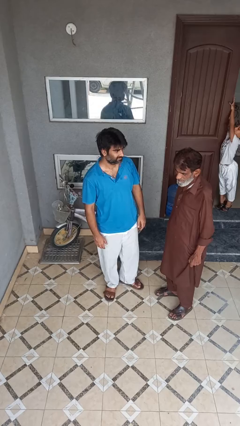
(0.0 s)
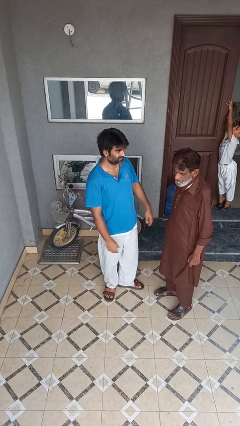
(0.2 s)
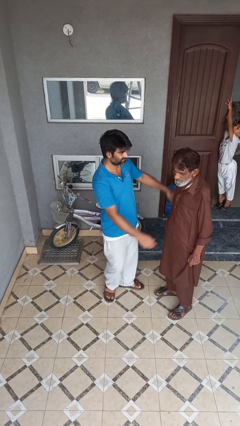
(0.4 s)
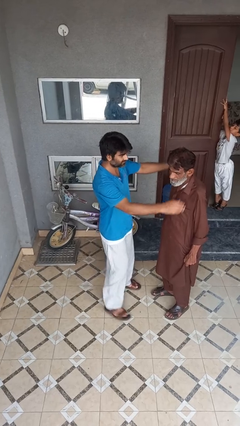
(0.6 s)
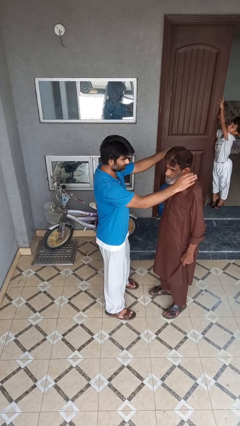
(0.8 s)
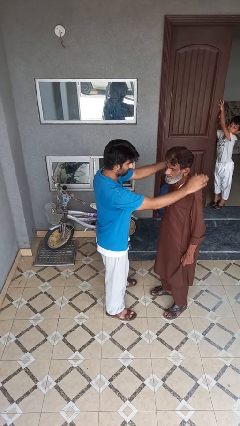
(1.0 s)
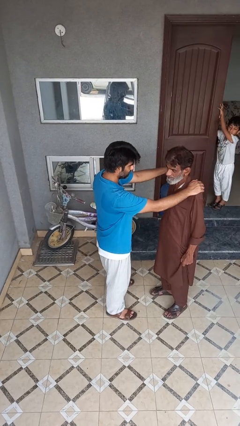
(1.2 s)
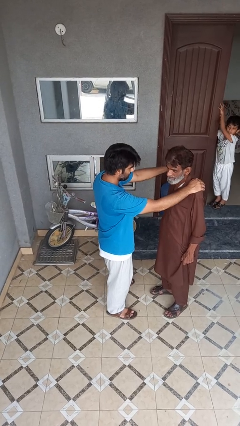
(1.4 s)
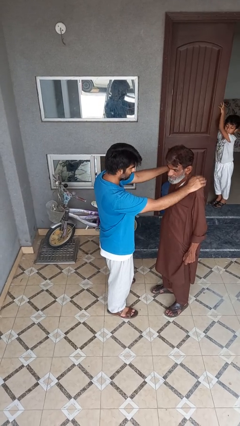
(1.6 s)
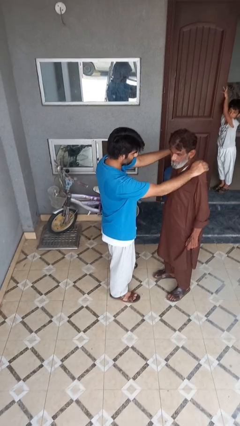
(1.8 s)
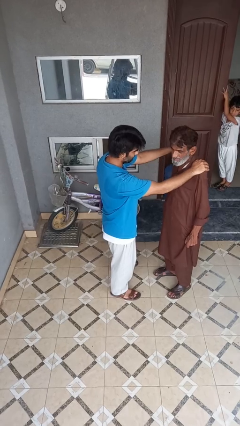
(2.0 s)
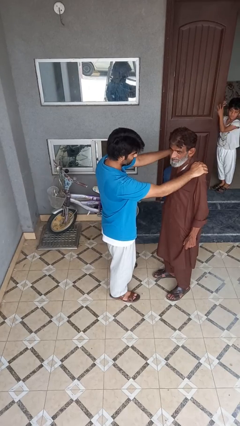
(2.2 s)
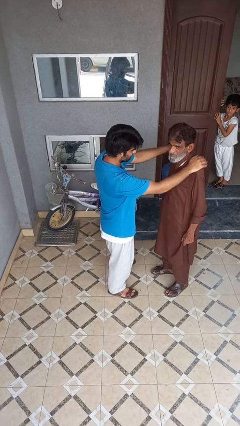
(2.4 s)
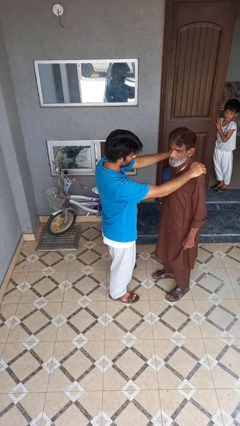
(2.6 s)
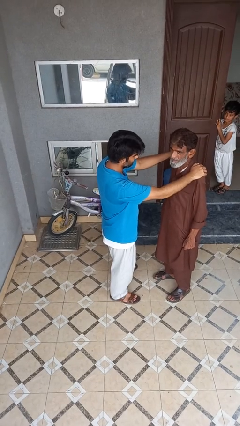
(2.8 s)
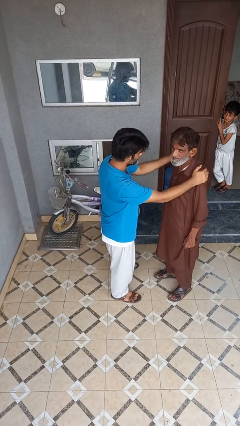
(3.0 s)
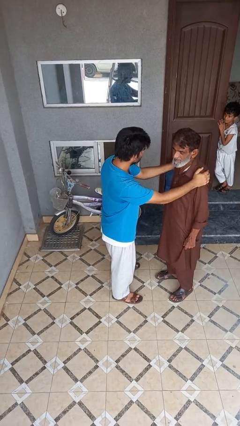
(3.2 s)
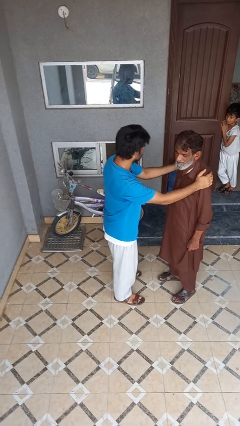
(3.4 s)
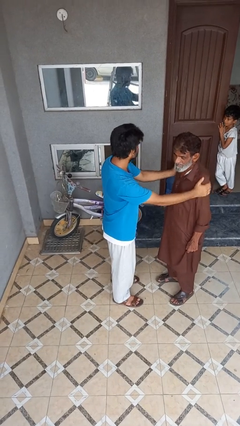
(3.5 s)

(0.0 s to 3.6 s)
person pounds shoulders of person

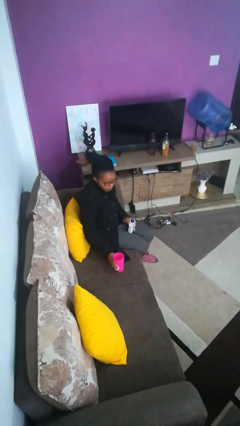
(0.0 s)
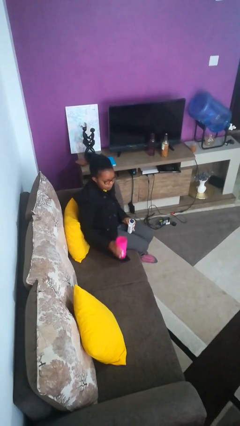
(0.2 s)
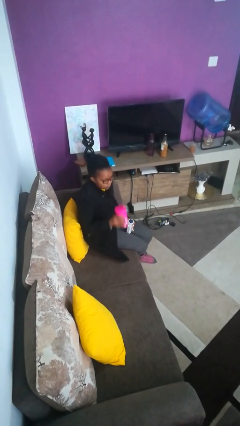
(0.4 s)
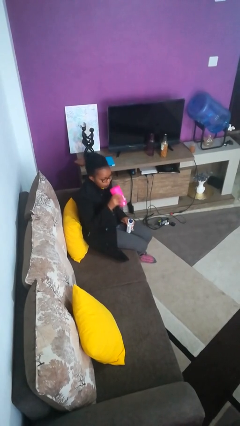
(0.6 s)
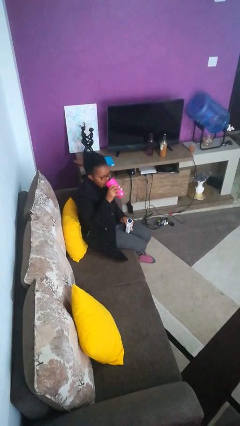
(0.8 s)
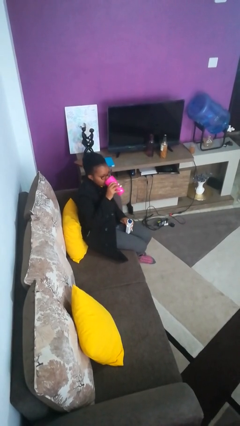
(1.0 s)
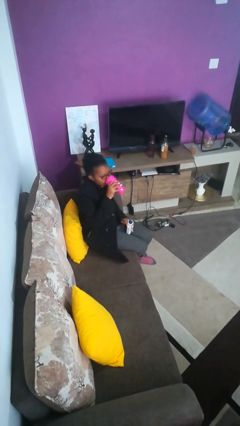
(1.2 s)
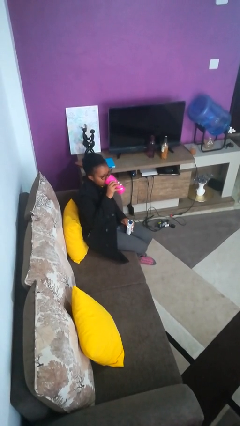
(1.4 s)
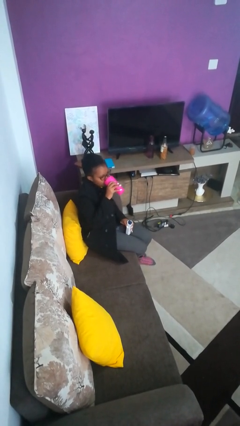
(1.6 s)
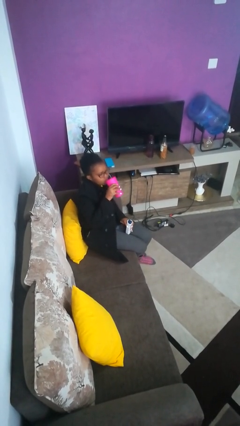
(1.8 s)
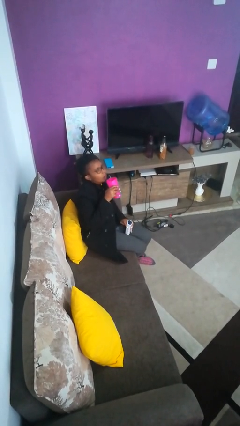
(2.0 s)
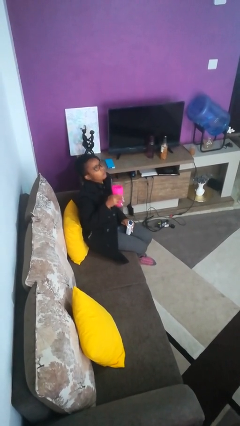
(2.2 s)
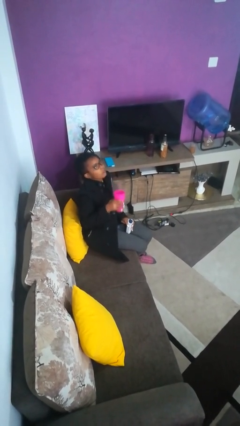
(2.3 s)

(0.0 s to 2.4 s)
person drinks from cup

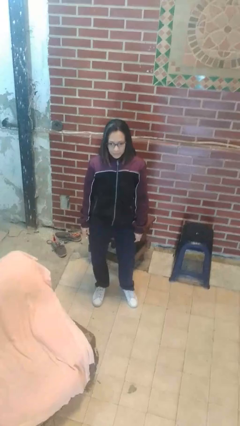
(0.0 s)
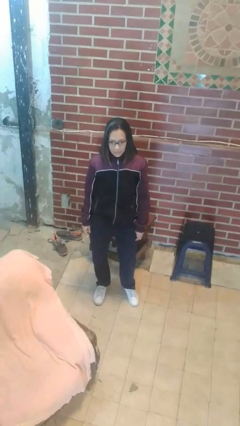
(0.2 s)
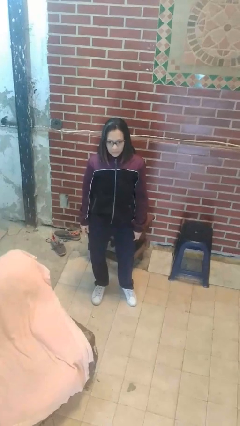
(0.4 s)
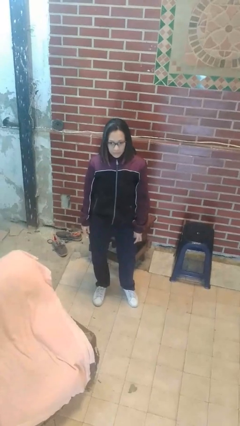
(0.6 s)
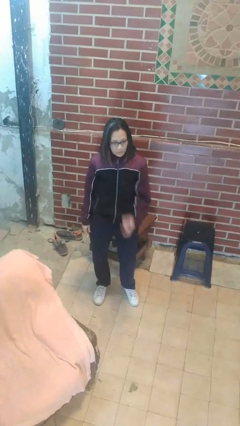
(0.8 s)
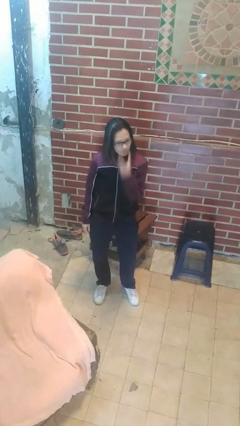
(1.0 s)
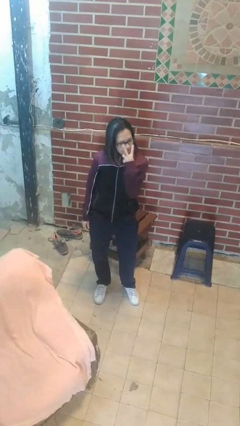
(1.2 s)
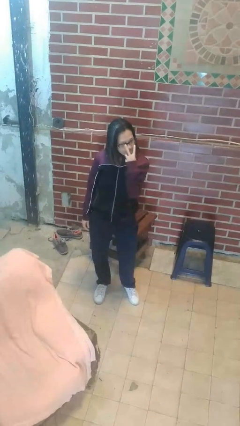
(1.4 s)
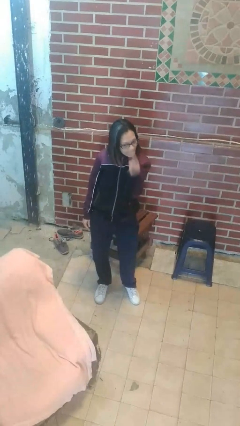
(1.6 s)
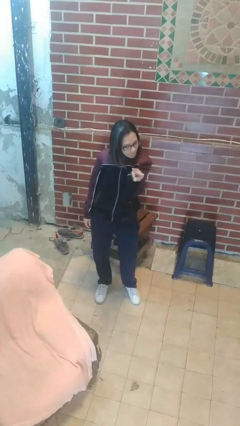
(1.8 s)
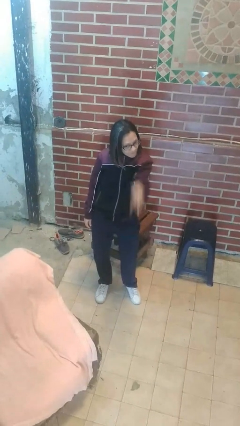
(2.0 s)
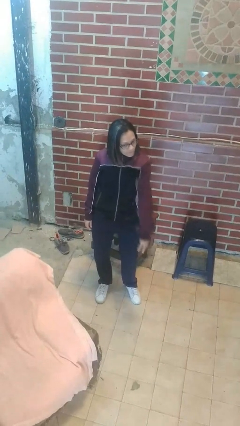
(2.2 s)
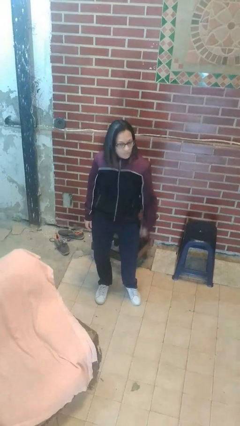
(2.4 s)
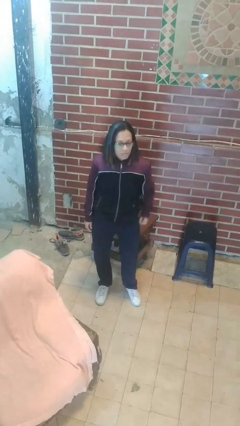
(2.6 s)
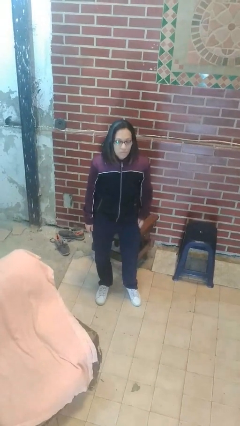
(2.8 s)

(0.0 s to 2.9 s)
person gestures watch closely

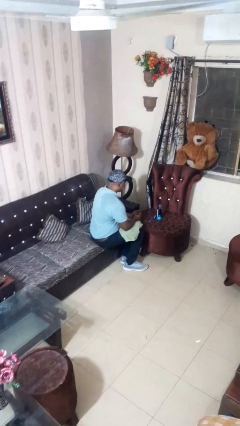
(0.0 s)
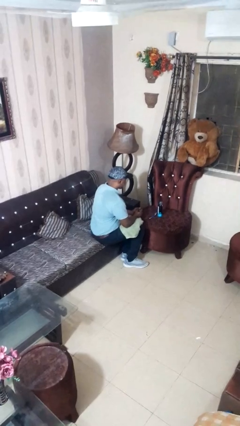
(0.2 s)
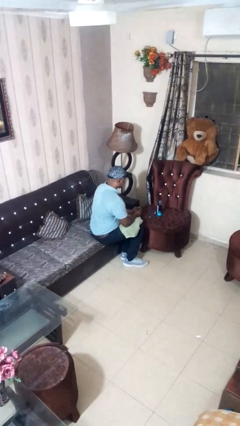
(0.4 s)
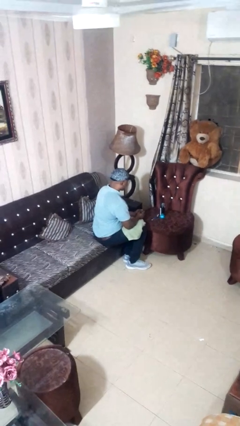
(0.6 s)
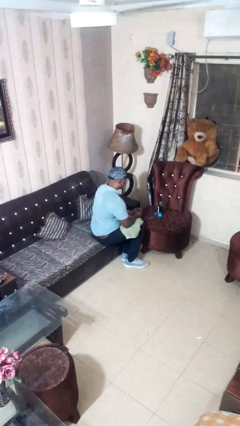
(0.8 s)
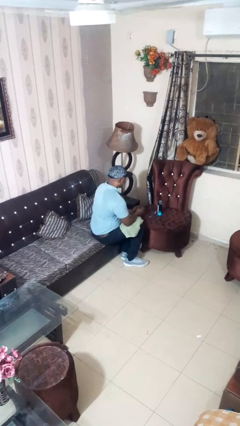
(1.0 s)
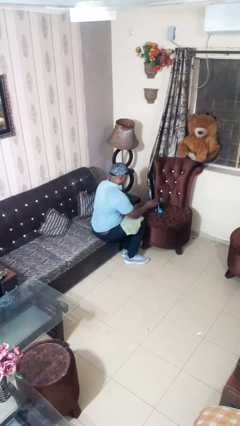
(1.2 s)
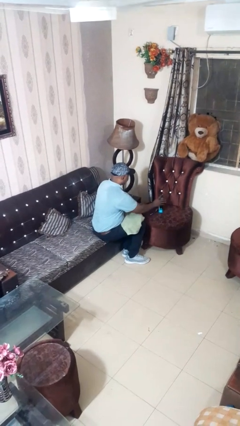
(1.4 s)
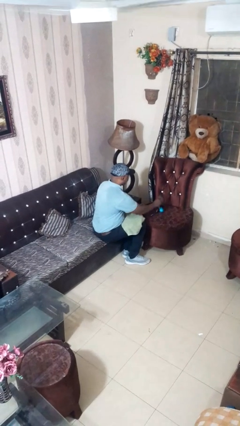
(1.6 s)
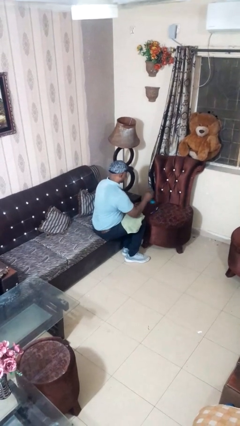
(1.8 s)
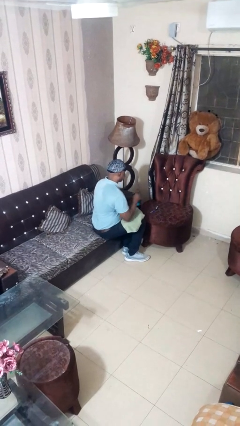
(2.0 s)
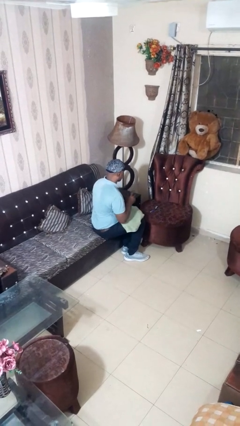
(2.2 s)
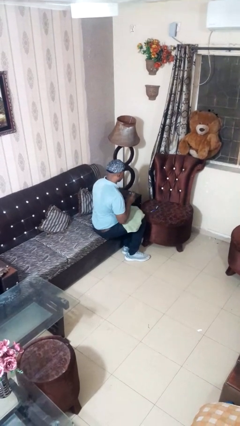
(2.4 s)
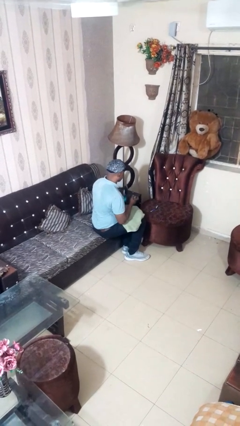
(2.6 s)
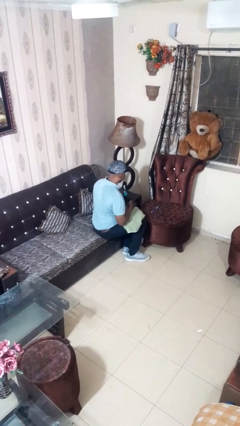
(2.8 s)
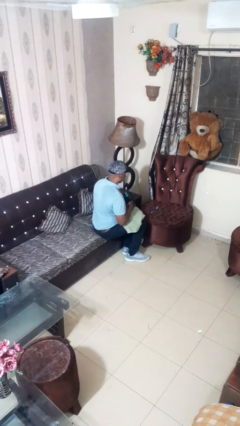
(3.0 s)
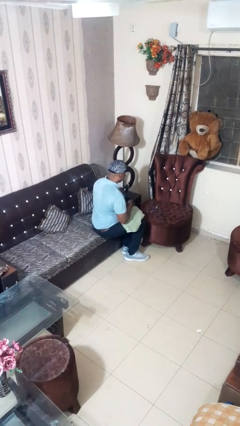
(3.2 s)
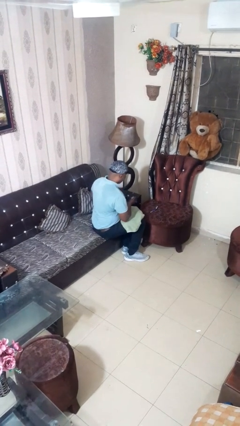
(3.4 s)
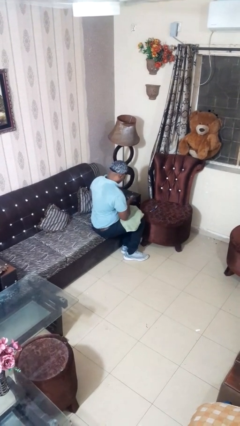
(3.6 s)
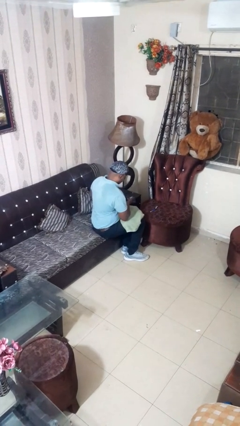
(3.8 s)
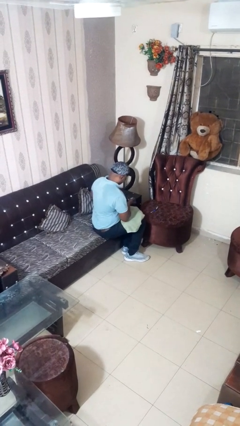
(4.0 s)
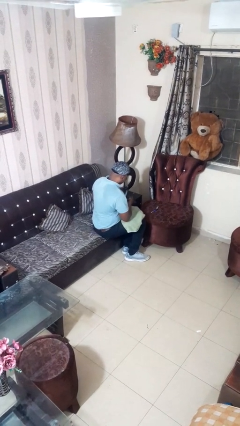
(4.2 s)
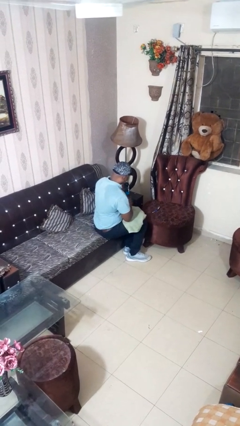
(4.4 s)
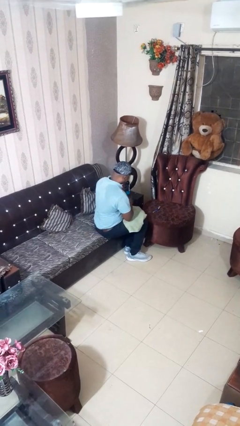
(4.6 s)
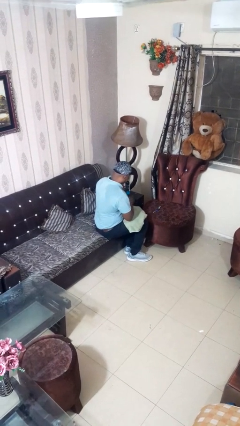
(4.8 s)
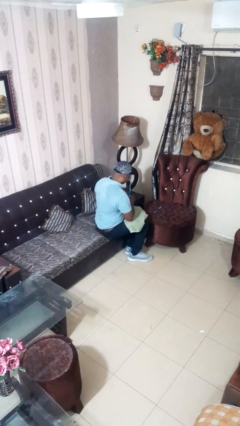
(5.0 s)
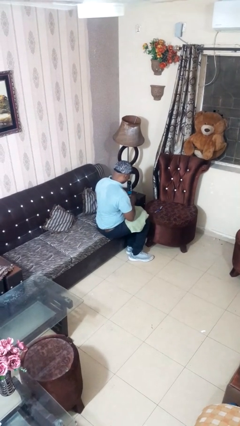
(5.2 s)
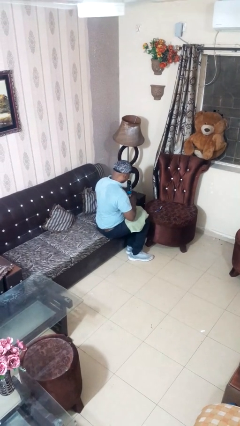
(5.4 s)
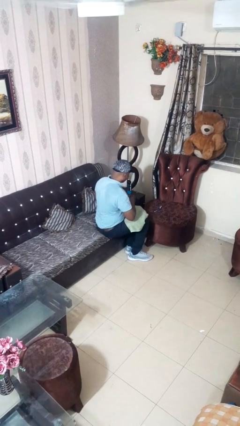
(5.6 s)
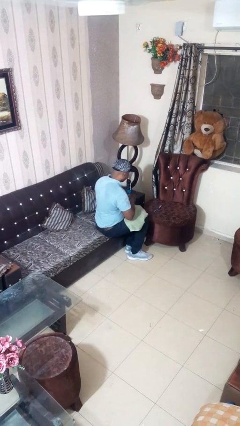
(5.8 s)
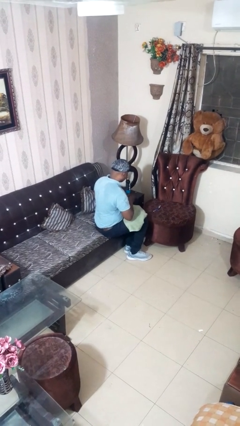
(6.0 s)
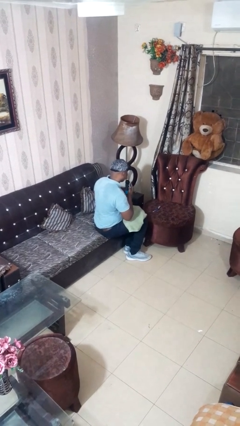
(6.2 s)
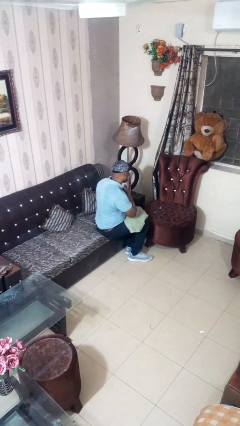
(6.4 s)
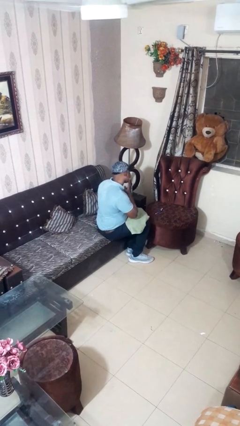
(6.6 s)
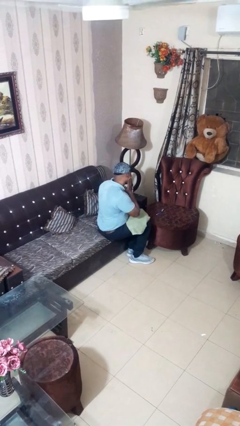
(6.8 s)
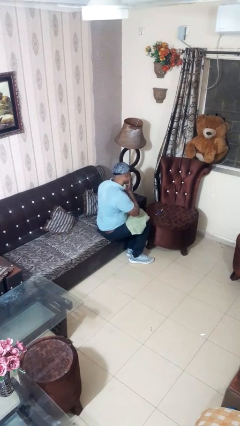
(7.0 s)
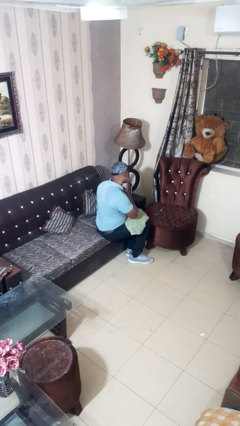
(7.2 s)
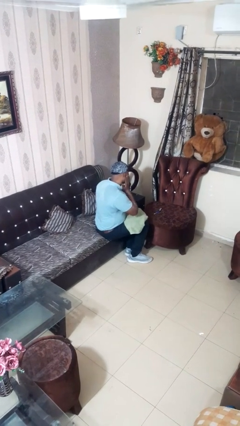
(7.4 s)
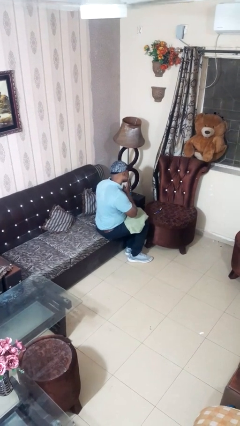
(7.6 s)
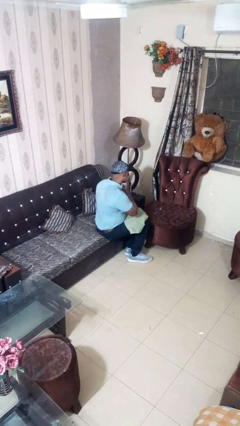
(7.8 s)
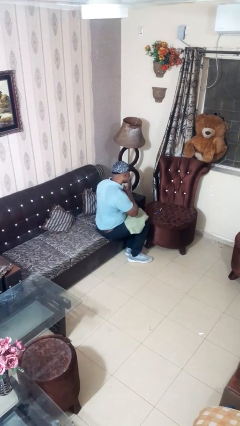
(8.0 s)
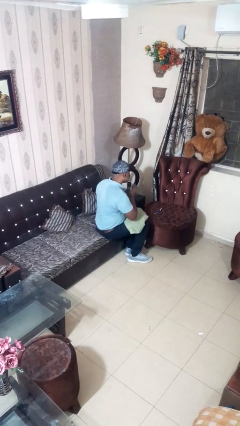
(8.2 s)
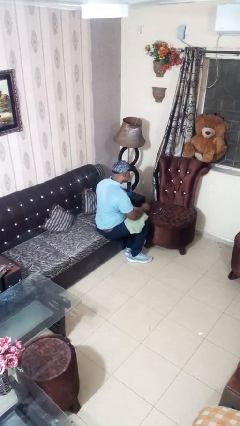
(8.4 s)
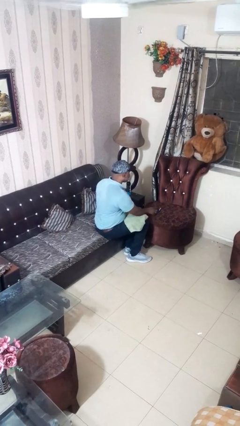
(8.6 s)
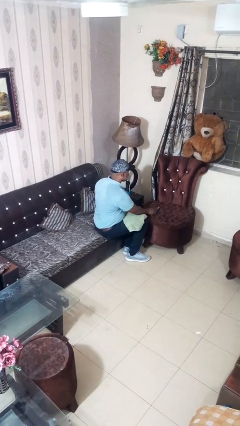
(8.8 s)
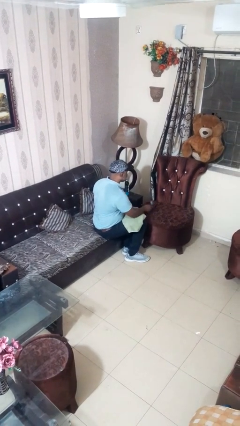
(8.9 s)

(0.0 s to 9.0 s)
person applies shaving cream

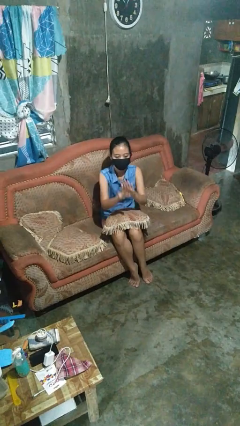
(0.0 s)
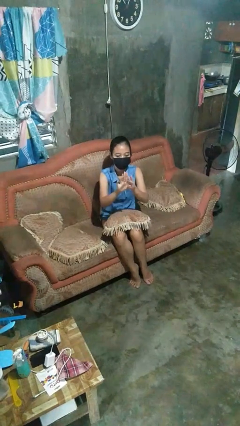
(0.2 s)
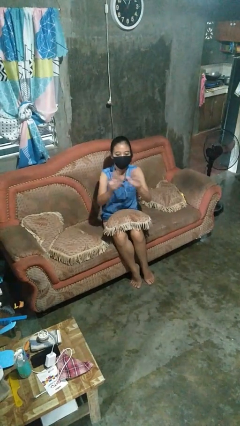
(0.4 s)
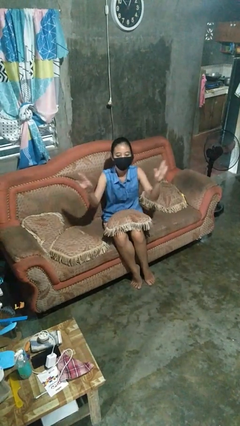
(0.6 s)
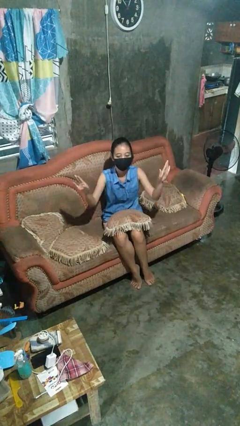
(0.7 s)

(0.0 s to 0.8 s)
person gestures zoom in
